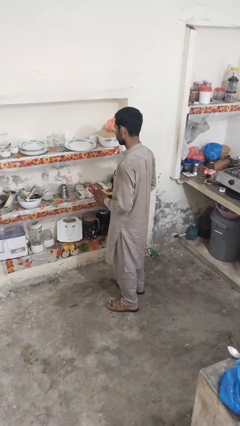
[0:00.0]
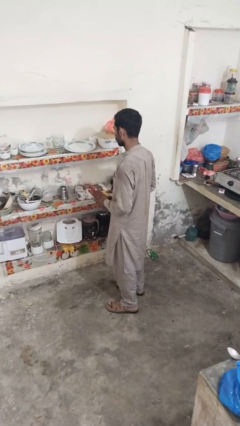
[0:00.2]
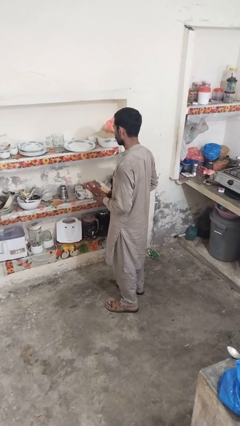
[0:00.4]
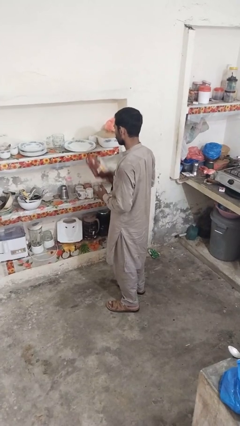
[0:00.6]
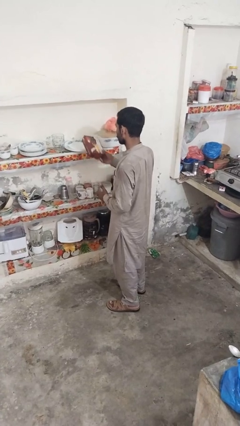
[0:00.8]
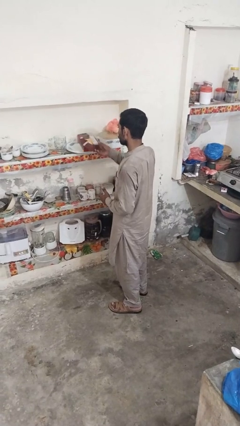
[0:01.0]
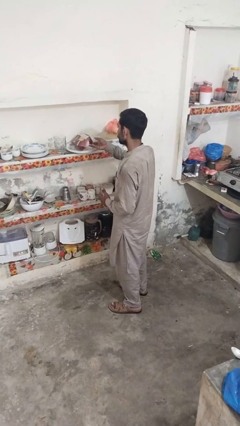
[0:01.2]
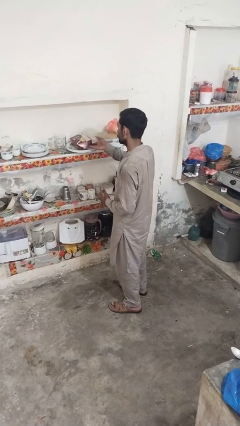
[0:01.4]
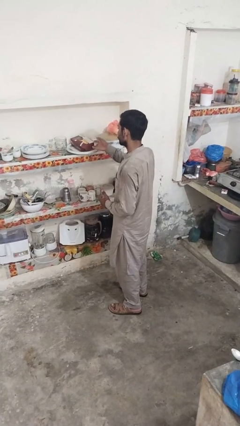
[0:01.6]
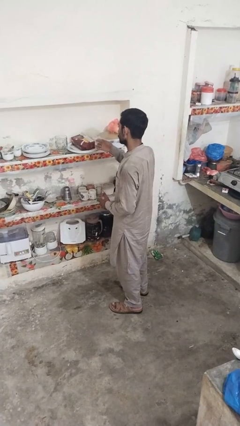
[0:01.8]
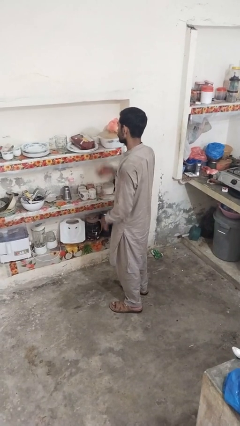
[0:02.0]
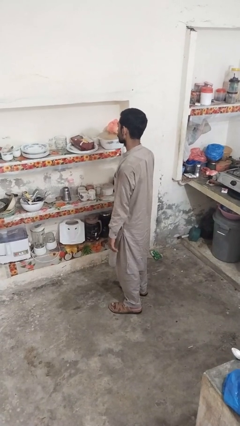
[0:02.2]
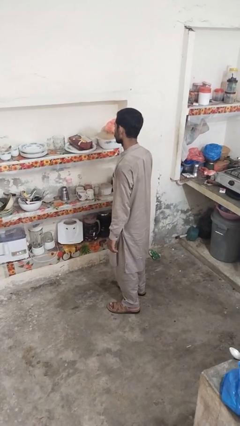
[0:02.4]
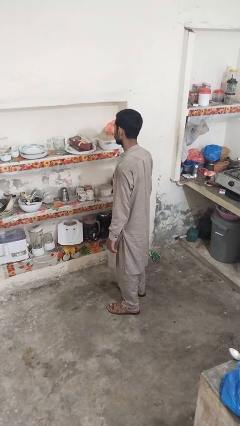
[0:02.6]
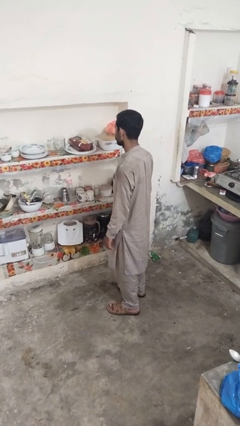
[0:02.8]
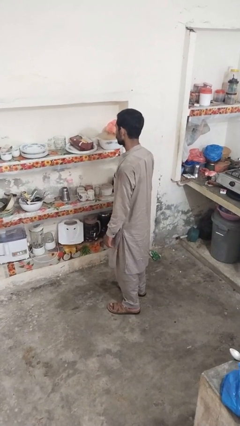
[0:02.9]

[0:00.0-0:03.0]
person puts down object into cabinet

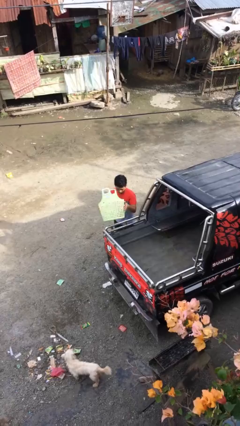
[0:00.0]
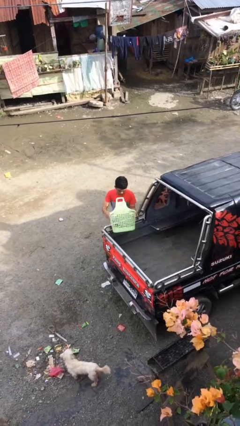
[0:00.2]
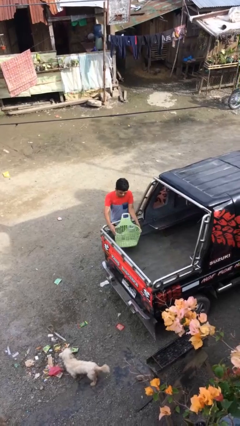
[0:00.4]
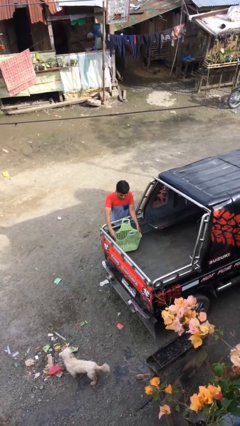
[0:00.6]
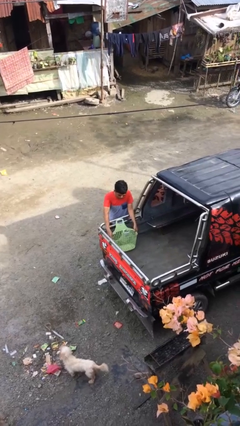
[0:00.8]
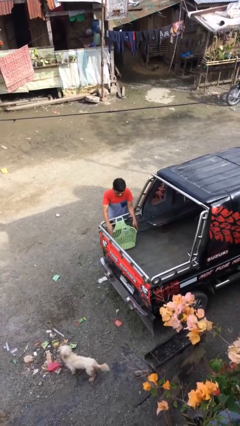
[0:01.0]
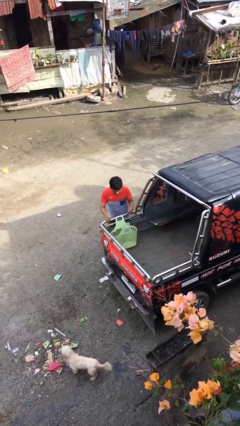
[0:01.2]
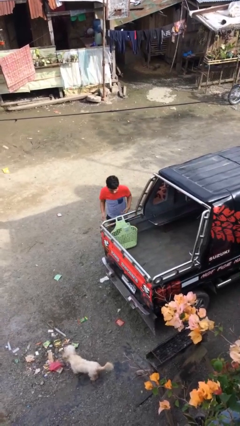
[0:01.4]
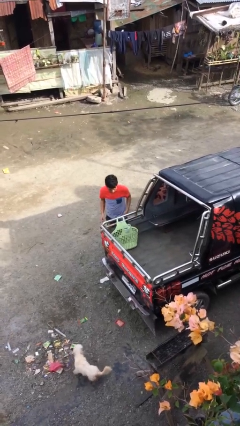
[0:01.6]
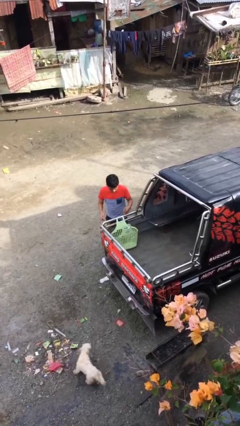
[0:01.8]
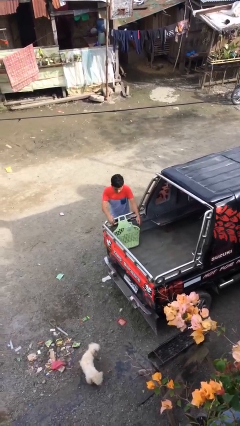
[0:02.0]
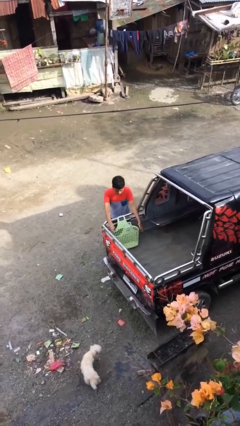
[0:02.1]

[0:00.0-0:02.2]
person loads car

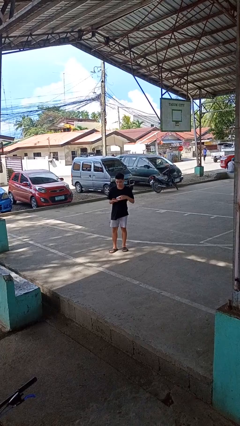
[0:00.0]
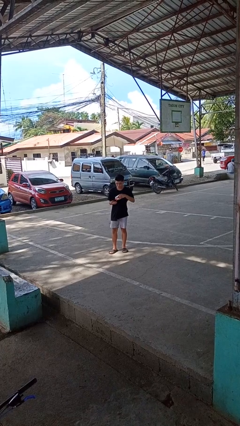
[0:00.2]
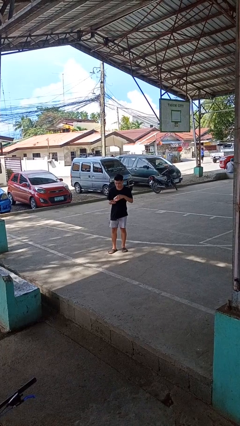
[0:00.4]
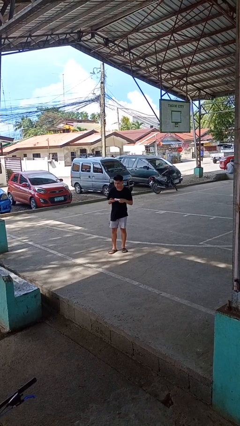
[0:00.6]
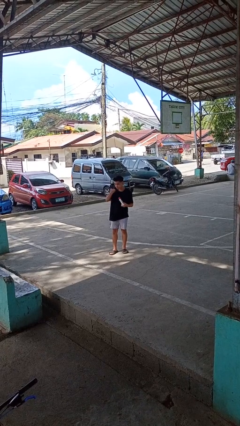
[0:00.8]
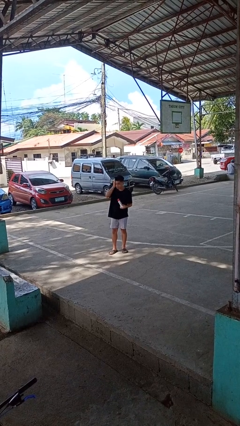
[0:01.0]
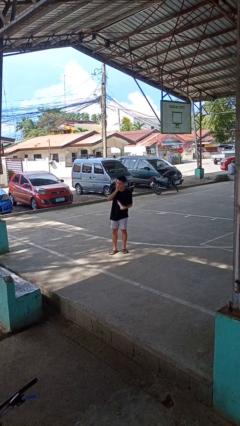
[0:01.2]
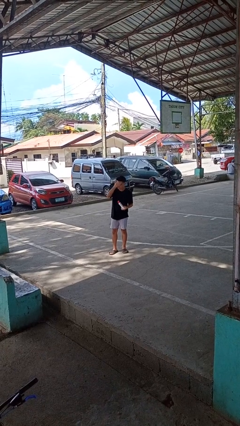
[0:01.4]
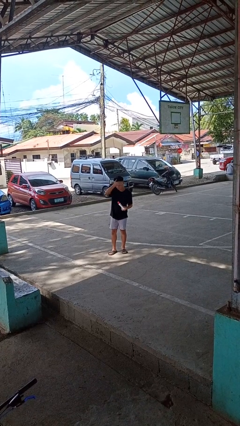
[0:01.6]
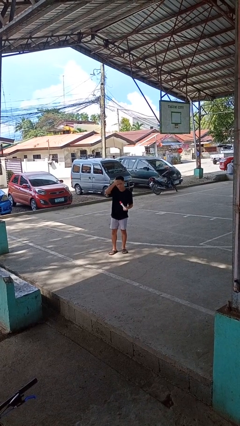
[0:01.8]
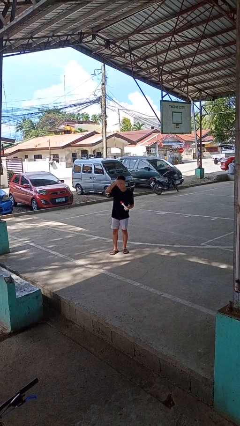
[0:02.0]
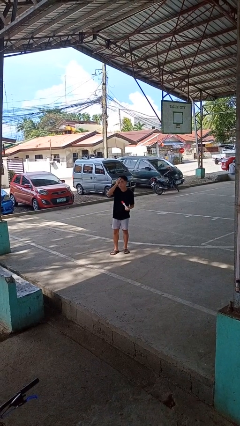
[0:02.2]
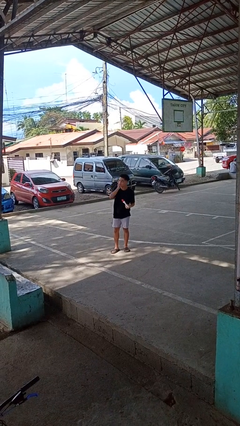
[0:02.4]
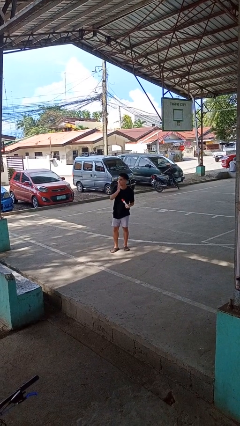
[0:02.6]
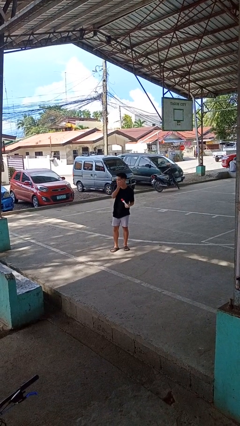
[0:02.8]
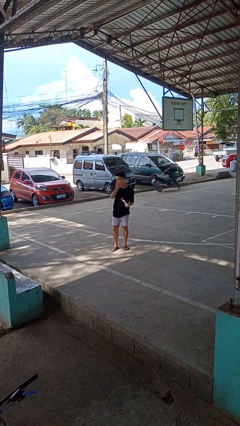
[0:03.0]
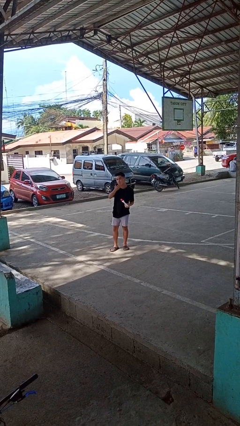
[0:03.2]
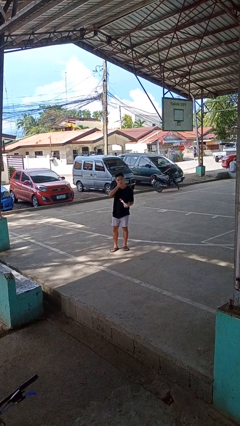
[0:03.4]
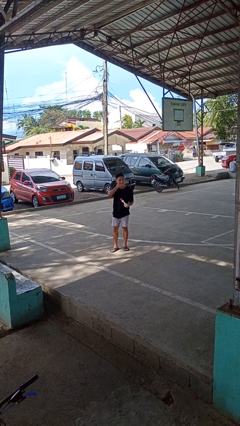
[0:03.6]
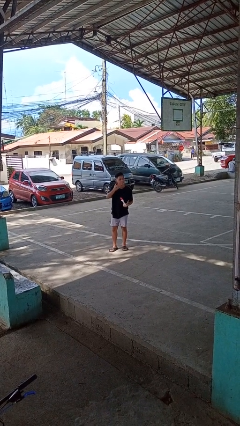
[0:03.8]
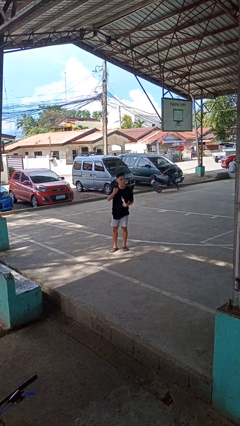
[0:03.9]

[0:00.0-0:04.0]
person applies facial moisturizer

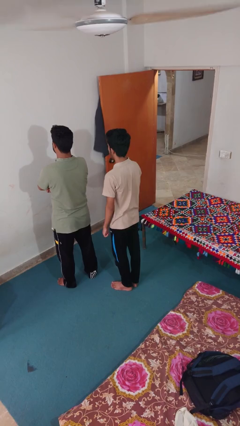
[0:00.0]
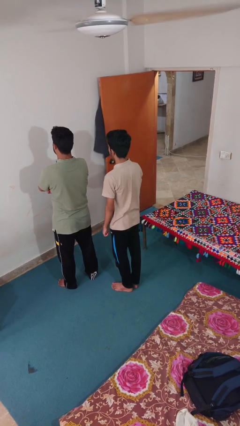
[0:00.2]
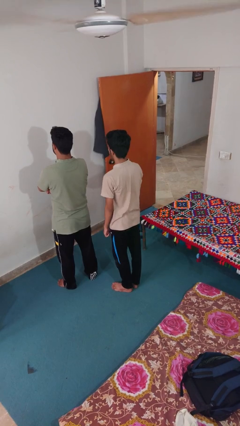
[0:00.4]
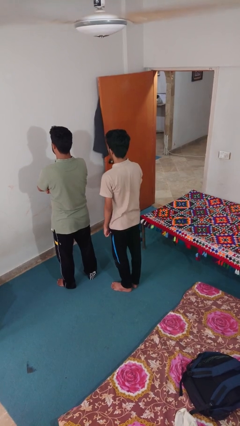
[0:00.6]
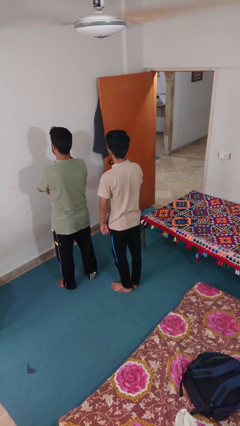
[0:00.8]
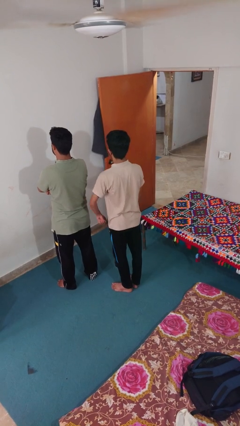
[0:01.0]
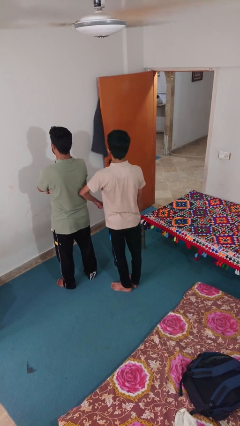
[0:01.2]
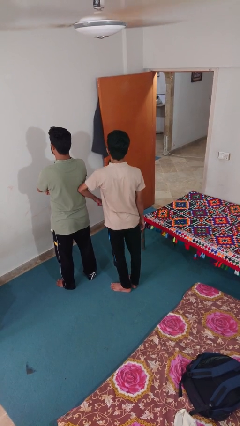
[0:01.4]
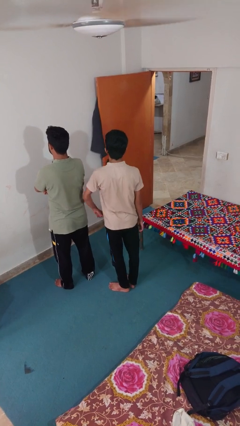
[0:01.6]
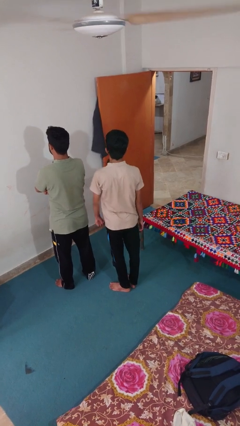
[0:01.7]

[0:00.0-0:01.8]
person nudges person with elbow

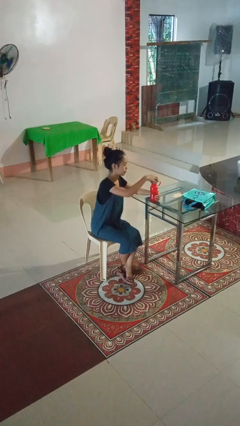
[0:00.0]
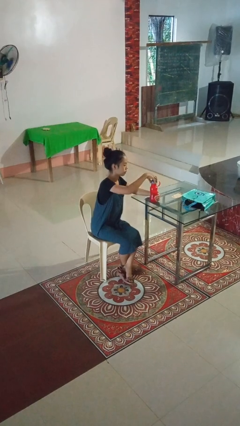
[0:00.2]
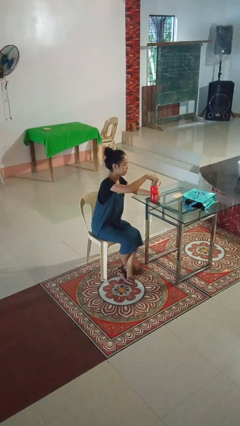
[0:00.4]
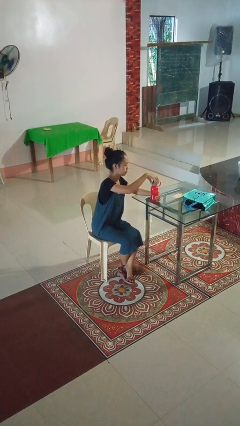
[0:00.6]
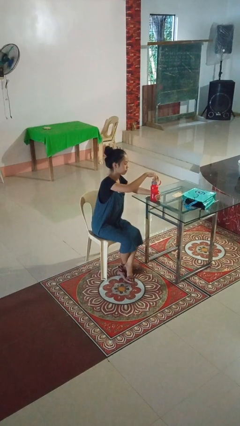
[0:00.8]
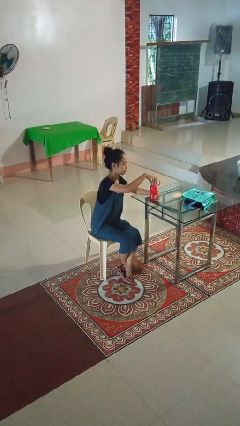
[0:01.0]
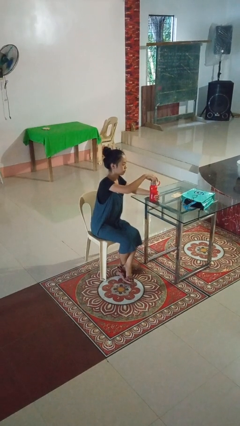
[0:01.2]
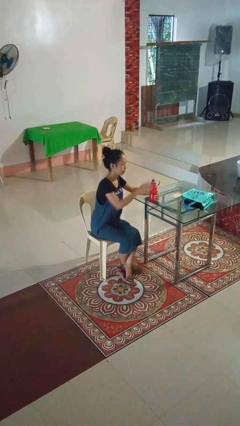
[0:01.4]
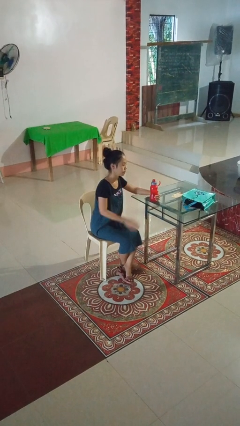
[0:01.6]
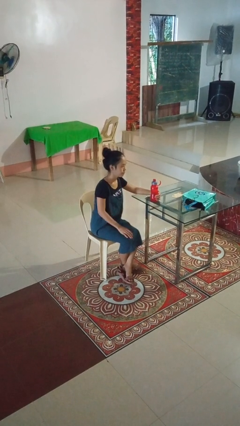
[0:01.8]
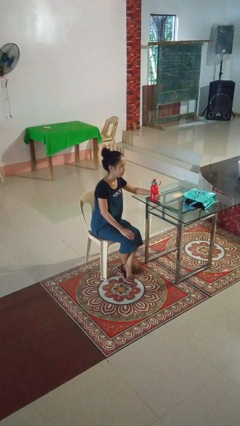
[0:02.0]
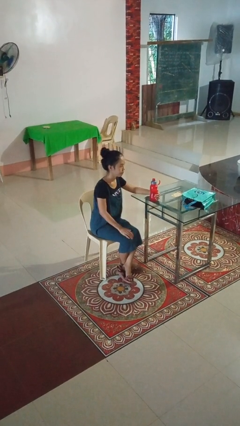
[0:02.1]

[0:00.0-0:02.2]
person screws lid to bottle

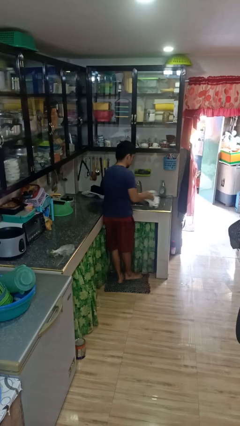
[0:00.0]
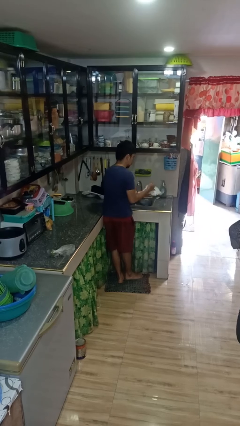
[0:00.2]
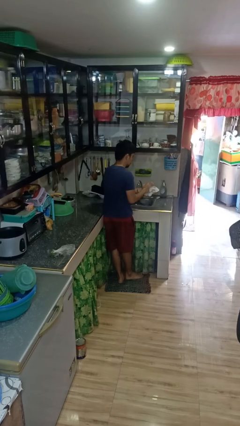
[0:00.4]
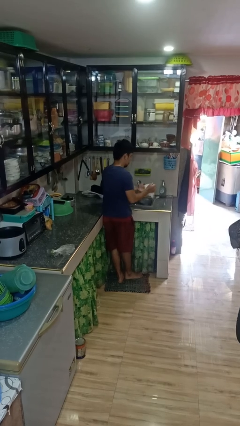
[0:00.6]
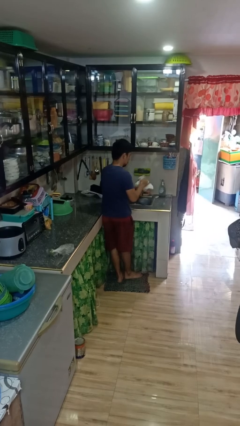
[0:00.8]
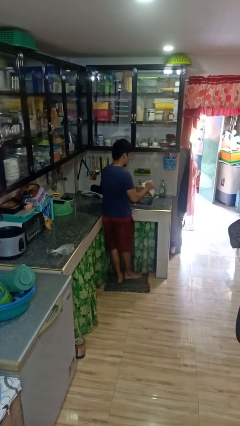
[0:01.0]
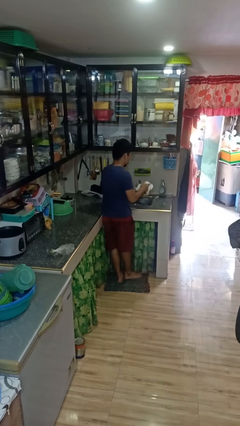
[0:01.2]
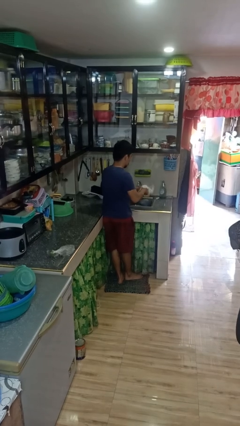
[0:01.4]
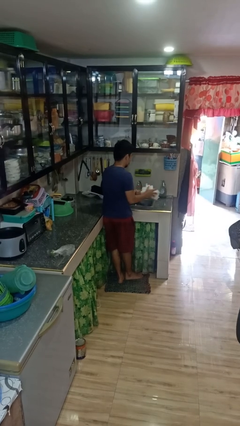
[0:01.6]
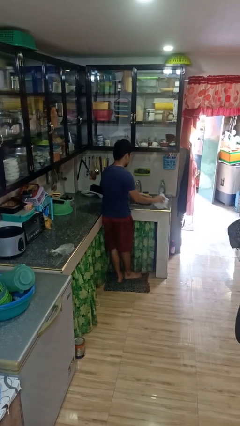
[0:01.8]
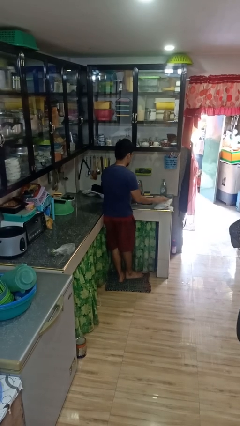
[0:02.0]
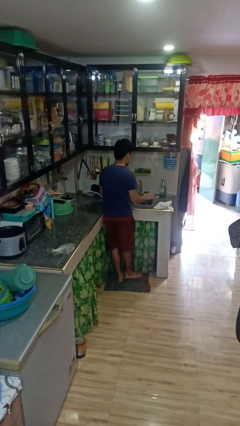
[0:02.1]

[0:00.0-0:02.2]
person dries hands with towel

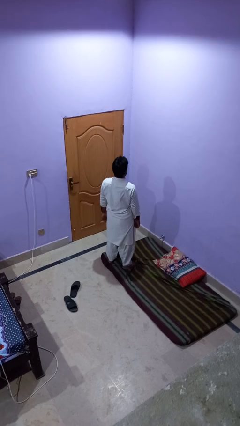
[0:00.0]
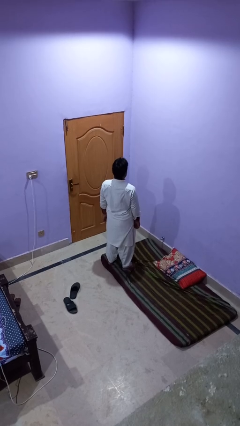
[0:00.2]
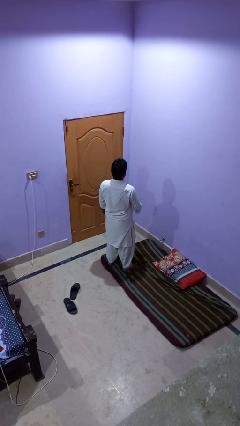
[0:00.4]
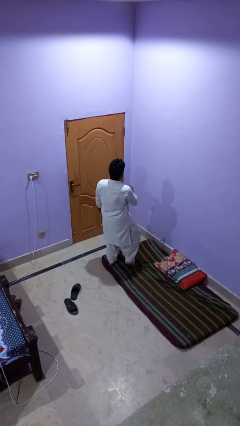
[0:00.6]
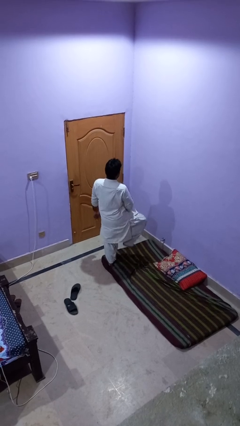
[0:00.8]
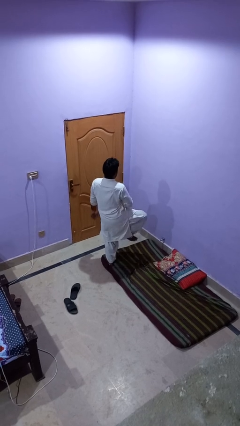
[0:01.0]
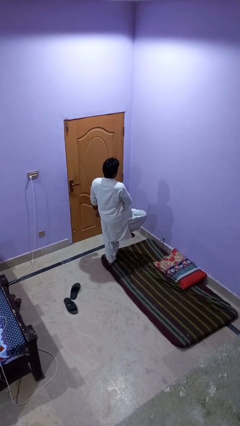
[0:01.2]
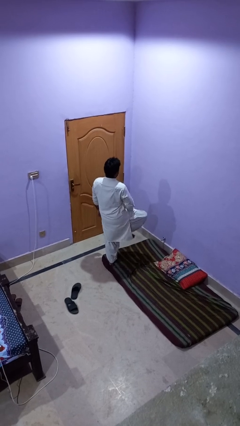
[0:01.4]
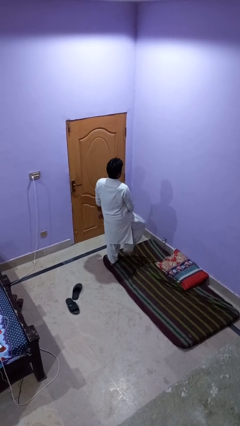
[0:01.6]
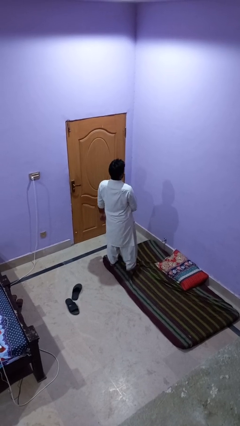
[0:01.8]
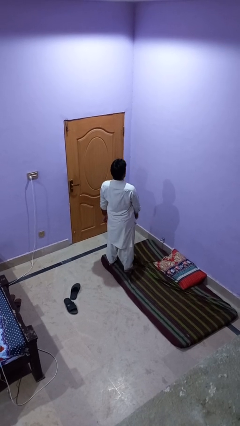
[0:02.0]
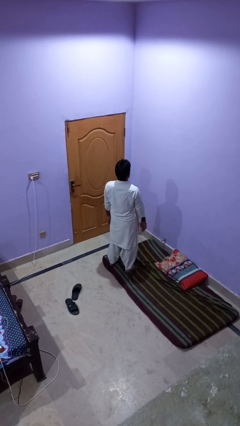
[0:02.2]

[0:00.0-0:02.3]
person slaps hands on thighs
